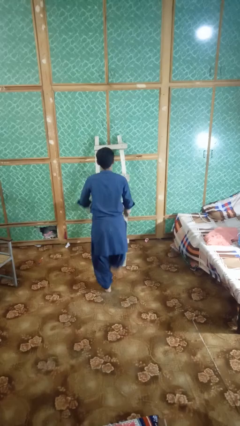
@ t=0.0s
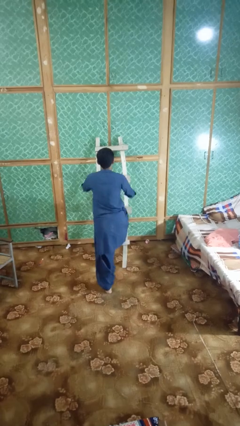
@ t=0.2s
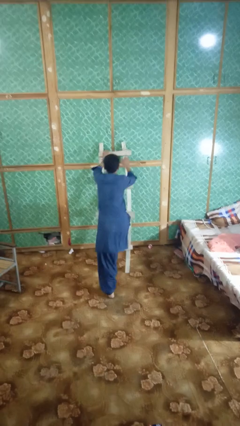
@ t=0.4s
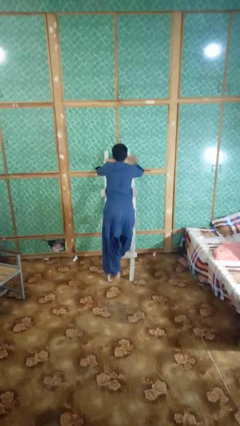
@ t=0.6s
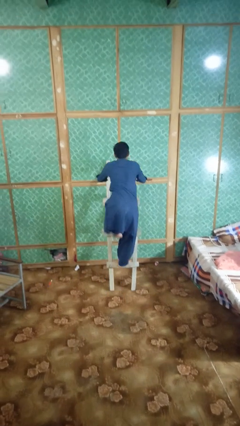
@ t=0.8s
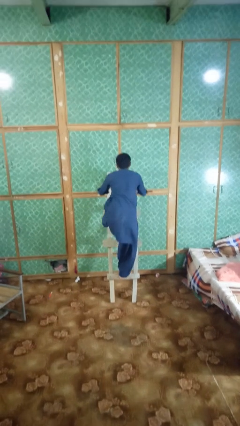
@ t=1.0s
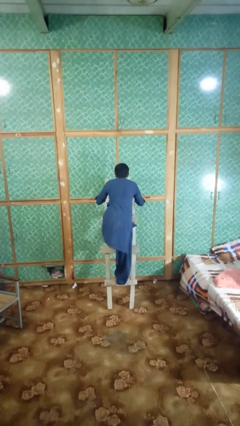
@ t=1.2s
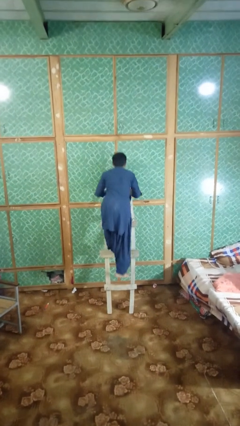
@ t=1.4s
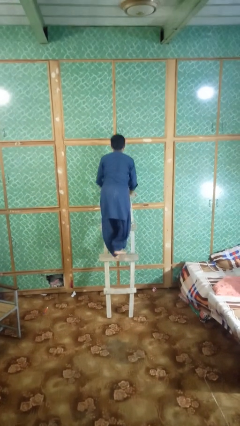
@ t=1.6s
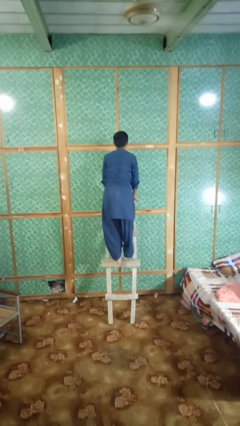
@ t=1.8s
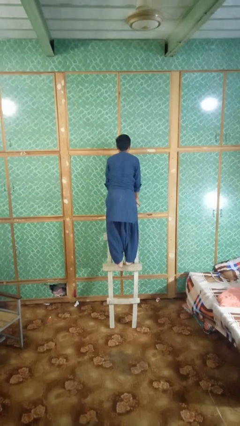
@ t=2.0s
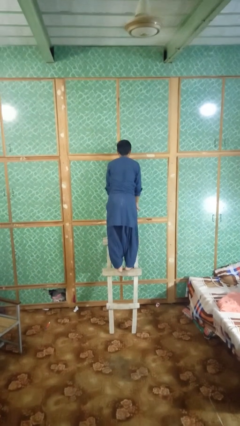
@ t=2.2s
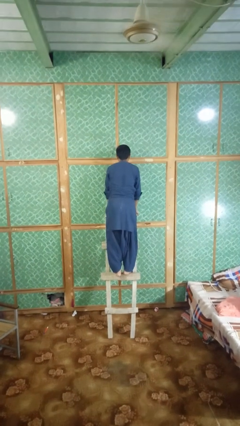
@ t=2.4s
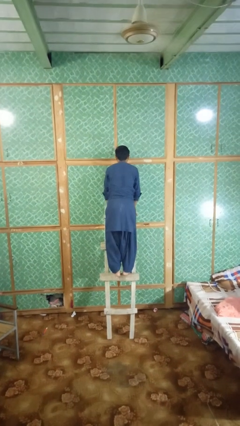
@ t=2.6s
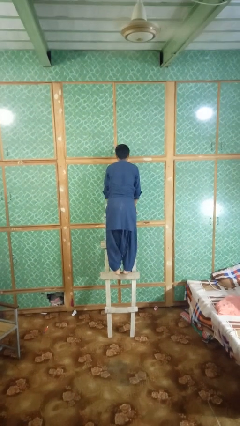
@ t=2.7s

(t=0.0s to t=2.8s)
person climbs up ladder

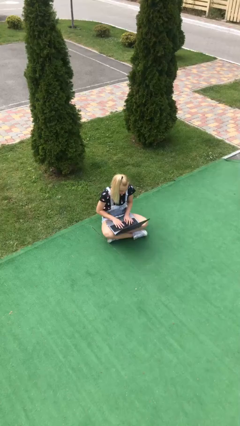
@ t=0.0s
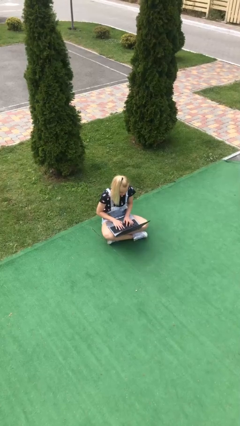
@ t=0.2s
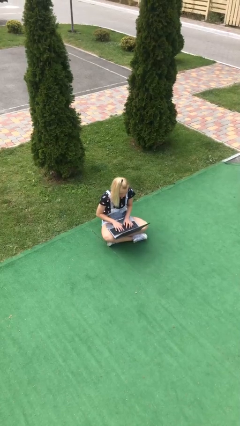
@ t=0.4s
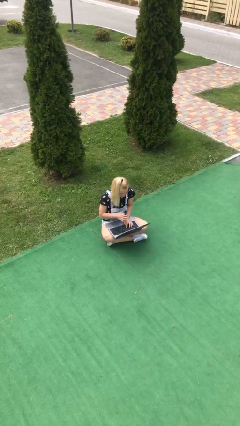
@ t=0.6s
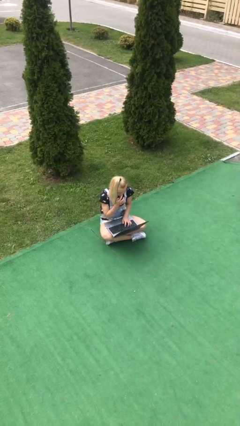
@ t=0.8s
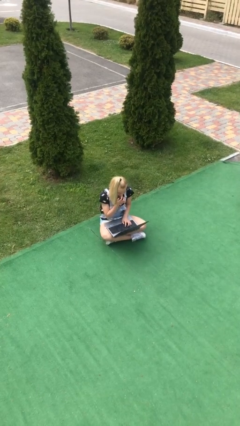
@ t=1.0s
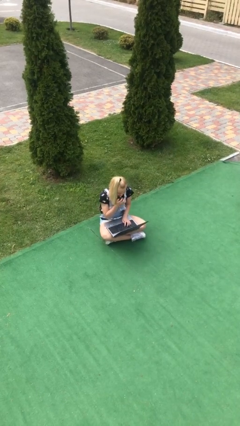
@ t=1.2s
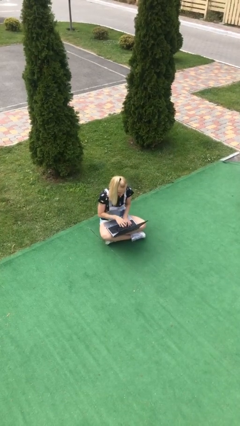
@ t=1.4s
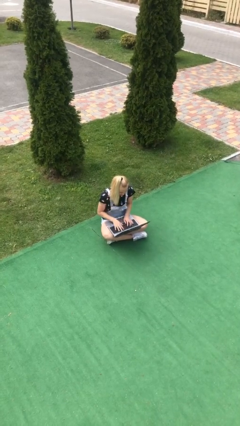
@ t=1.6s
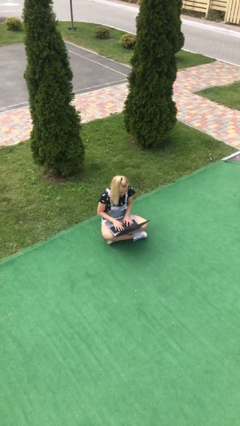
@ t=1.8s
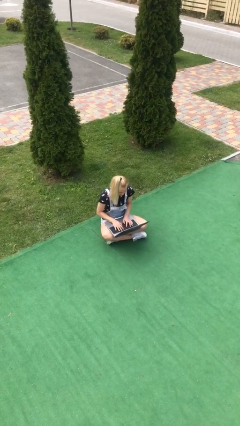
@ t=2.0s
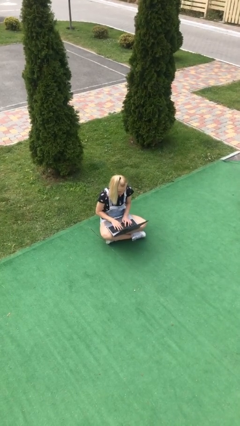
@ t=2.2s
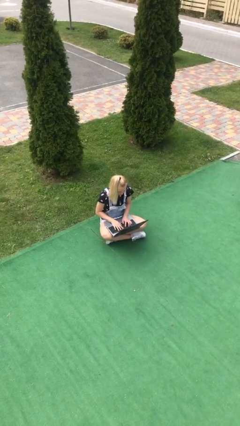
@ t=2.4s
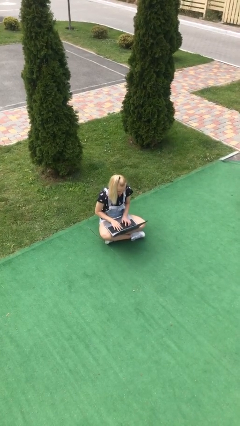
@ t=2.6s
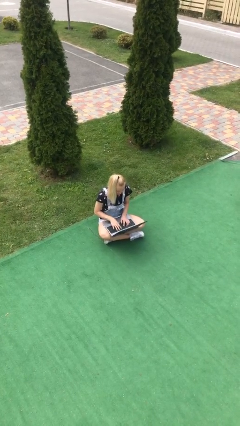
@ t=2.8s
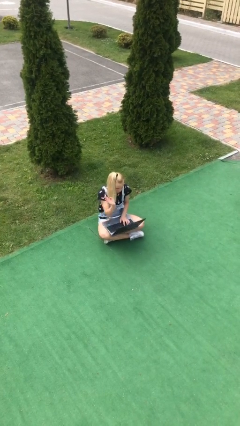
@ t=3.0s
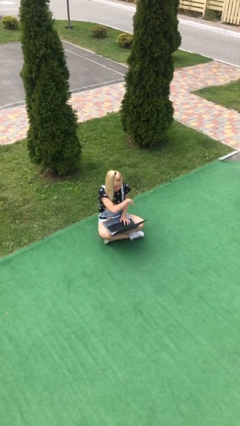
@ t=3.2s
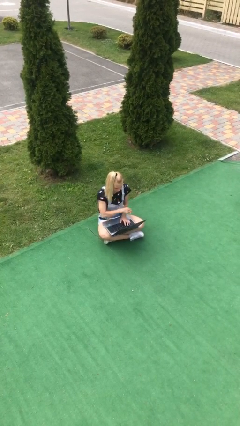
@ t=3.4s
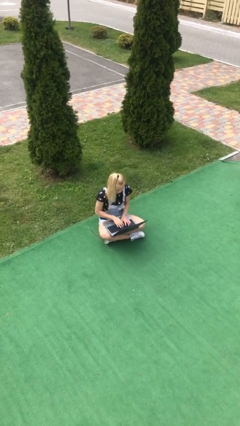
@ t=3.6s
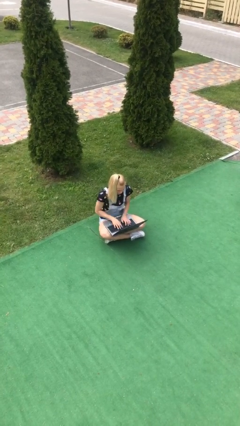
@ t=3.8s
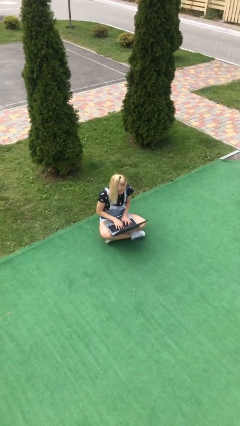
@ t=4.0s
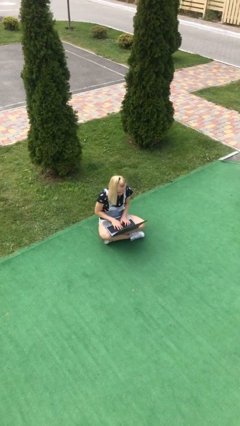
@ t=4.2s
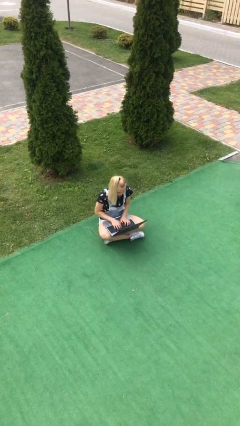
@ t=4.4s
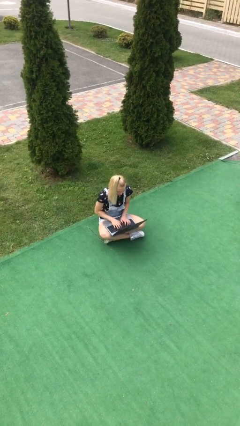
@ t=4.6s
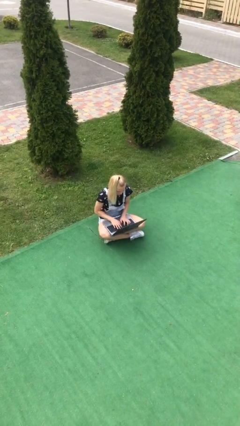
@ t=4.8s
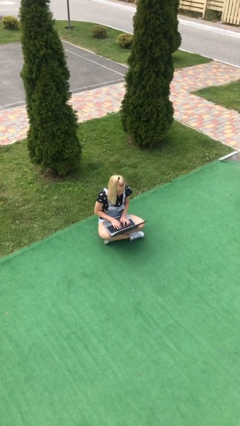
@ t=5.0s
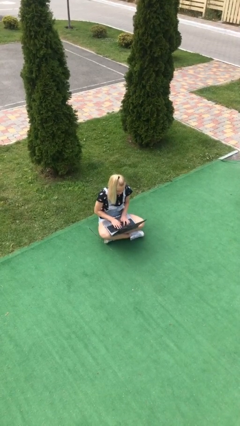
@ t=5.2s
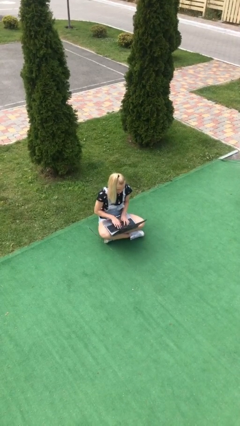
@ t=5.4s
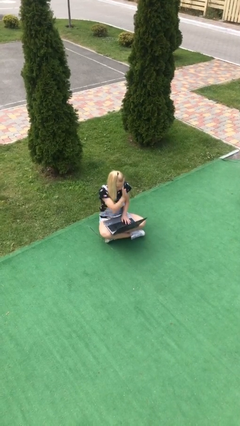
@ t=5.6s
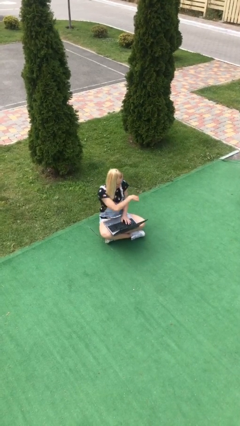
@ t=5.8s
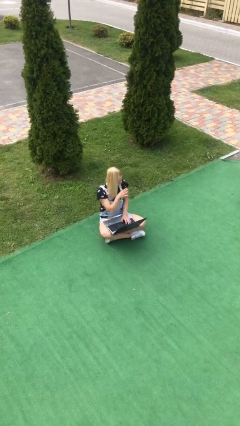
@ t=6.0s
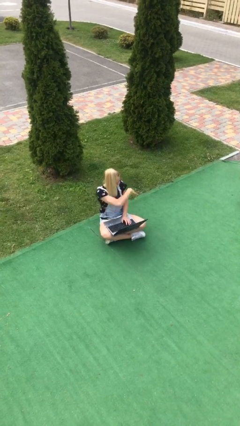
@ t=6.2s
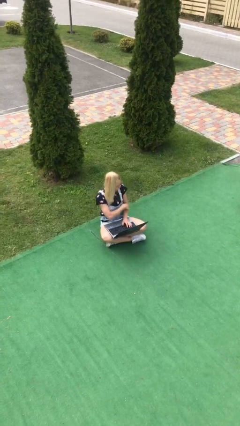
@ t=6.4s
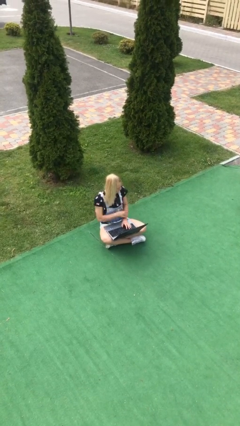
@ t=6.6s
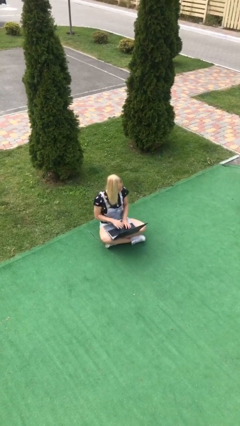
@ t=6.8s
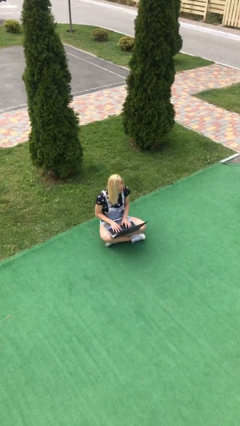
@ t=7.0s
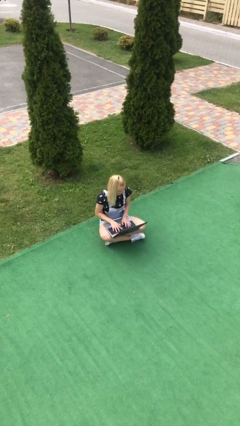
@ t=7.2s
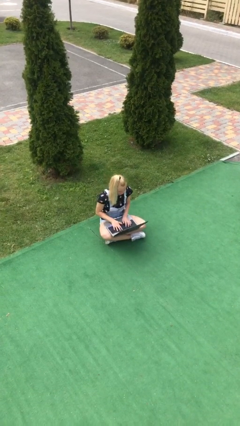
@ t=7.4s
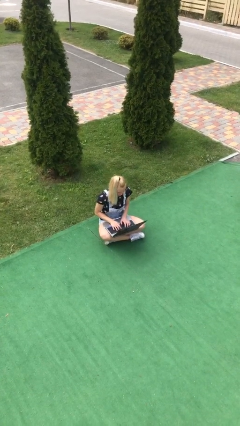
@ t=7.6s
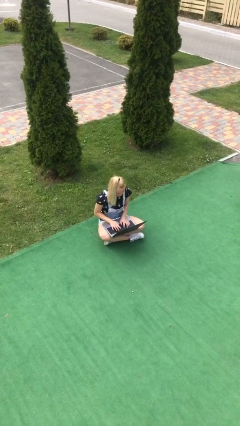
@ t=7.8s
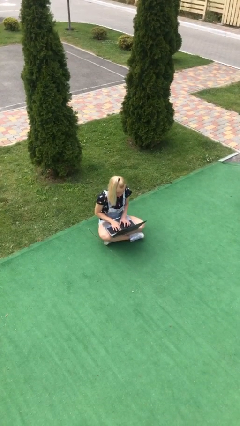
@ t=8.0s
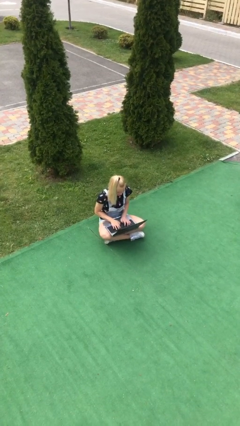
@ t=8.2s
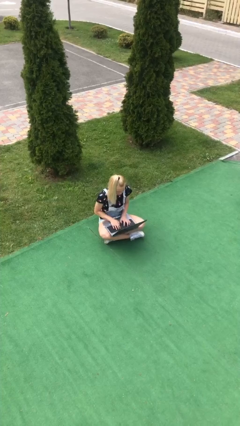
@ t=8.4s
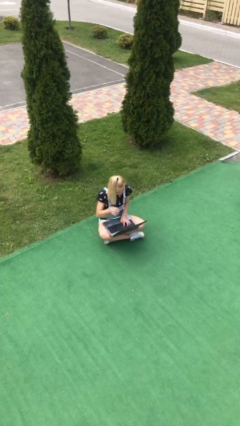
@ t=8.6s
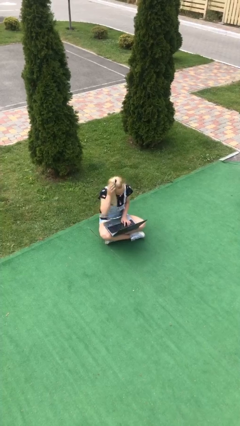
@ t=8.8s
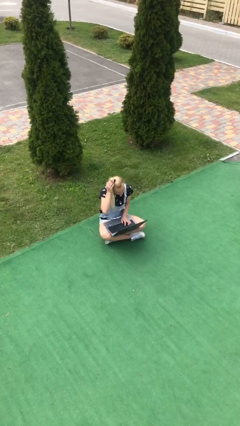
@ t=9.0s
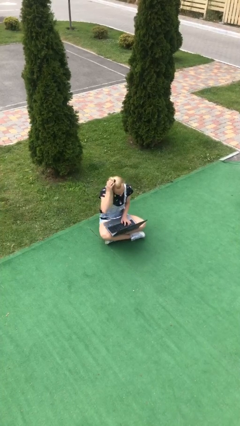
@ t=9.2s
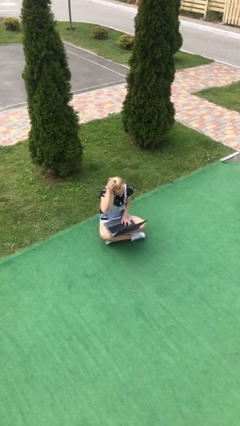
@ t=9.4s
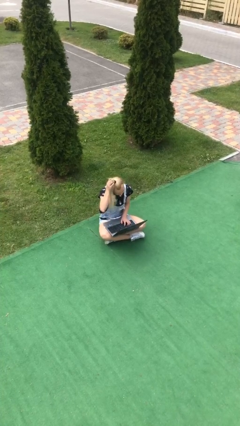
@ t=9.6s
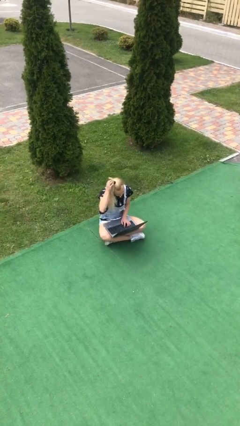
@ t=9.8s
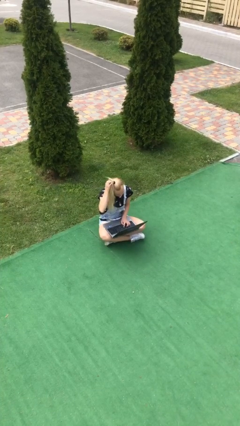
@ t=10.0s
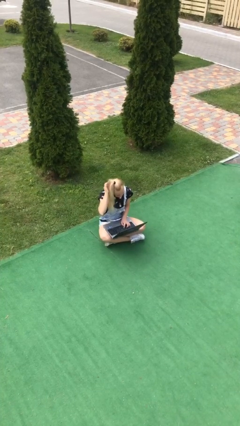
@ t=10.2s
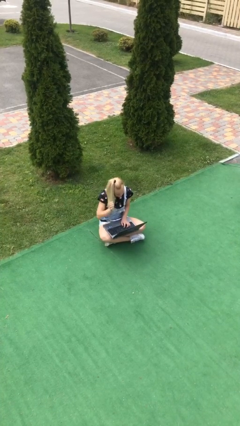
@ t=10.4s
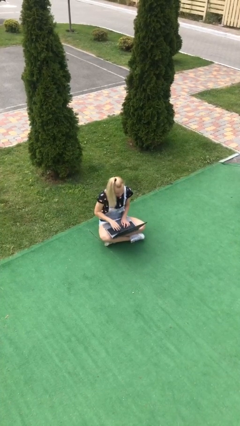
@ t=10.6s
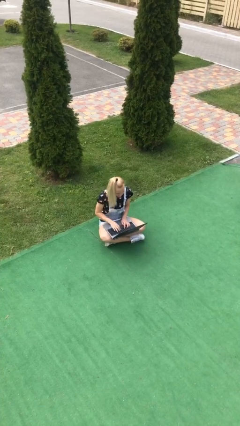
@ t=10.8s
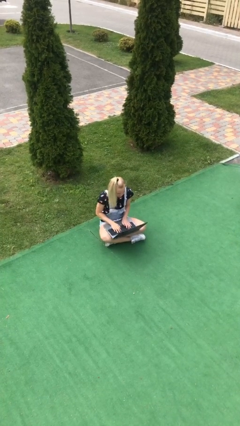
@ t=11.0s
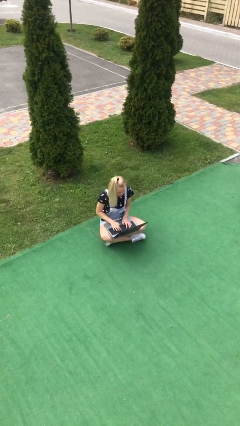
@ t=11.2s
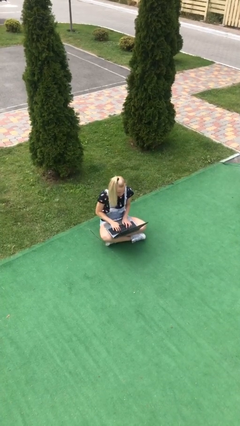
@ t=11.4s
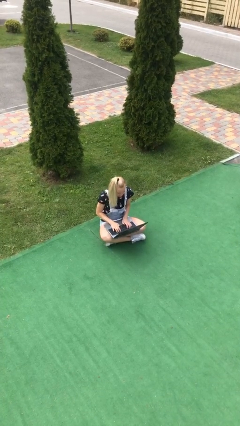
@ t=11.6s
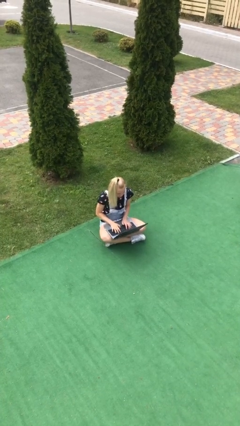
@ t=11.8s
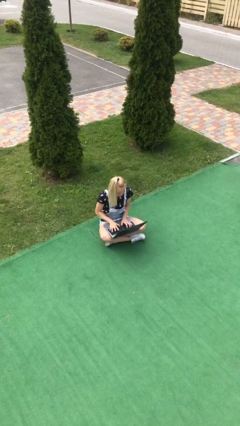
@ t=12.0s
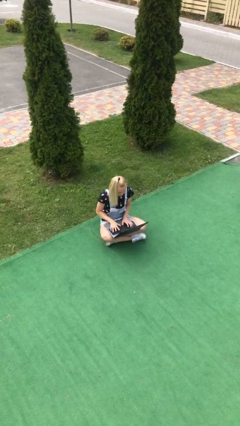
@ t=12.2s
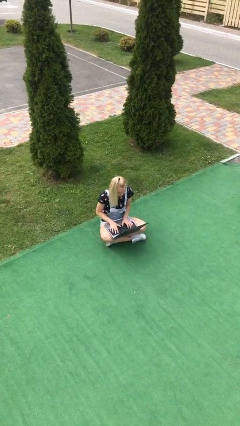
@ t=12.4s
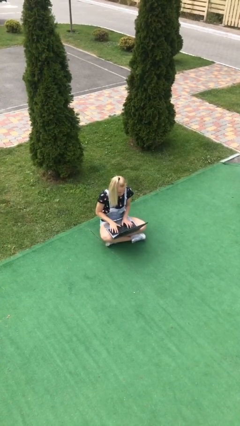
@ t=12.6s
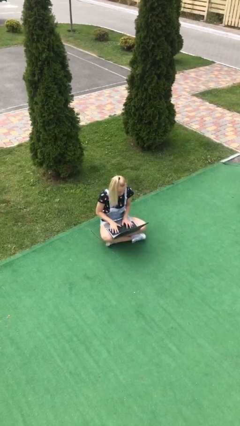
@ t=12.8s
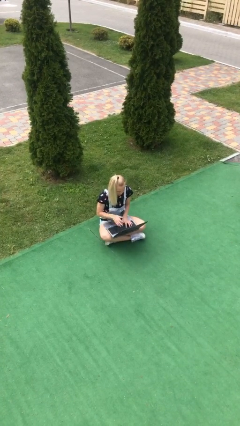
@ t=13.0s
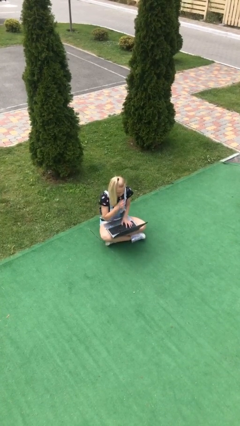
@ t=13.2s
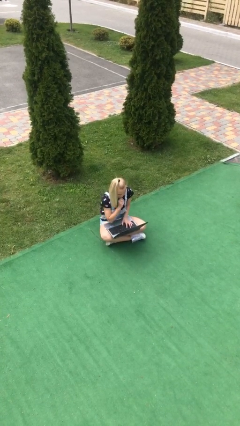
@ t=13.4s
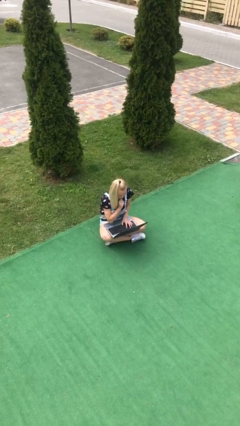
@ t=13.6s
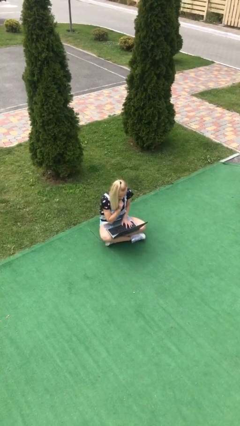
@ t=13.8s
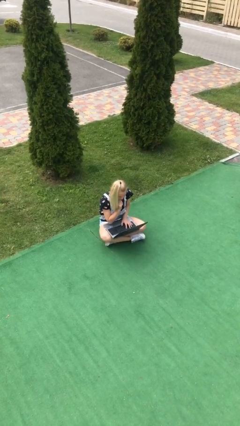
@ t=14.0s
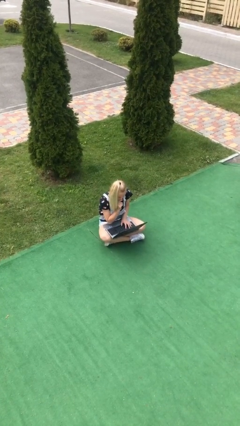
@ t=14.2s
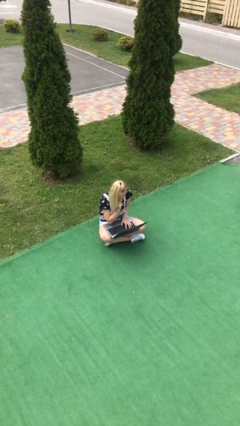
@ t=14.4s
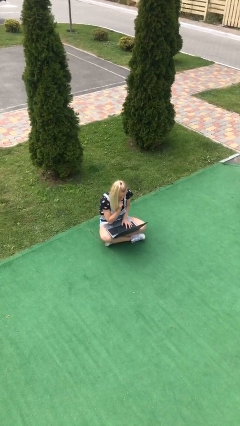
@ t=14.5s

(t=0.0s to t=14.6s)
person interacts with laptop

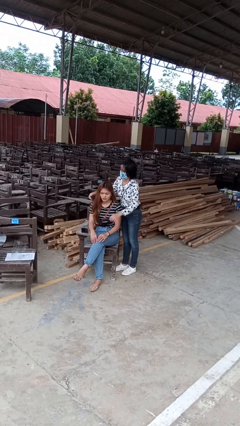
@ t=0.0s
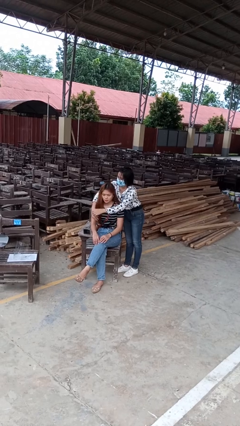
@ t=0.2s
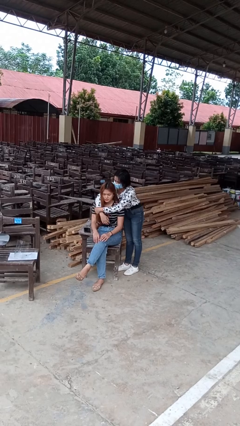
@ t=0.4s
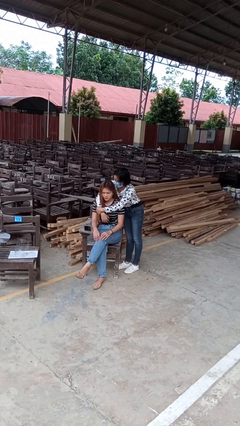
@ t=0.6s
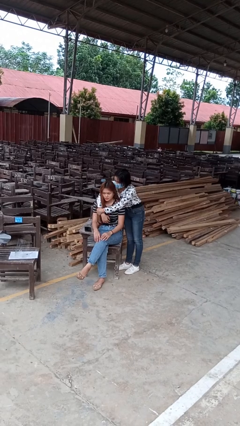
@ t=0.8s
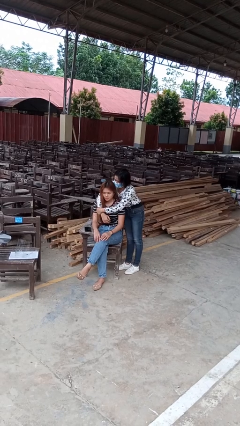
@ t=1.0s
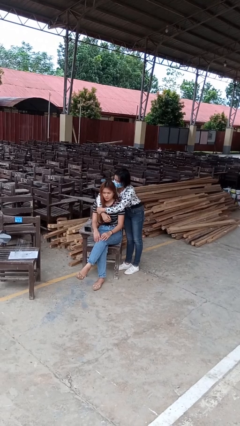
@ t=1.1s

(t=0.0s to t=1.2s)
person hugs person from behind
